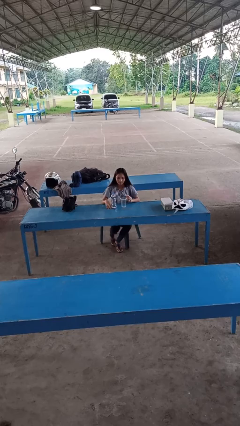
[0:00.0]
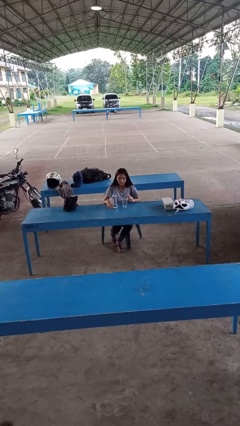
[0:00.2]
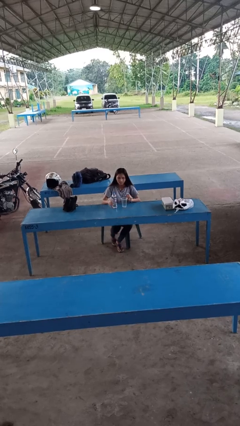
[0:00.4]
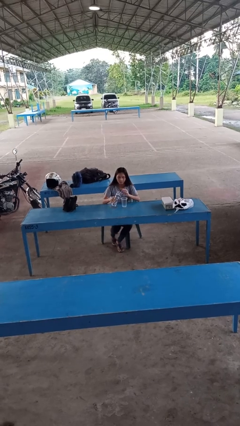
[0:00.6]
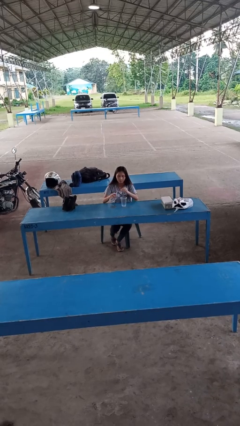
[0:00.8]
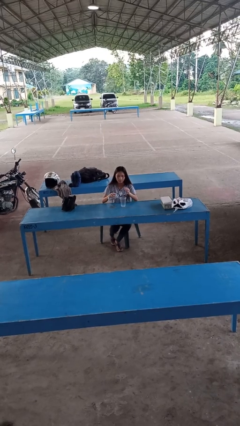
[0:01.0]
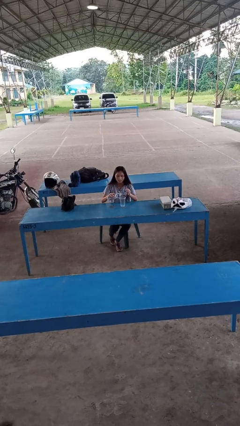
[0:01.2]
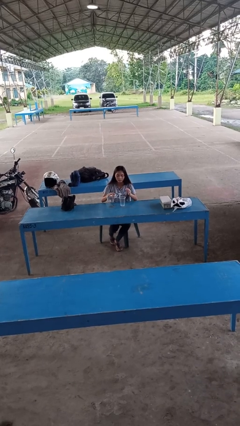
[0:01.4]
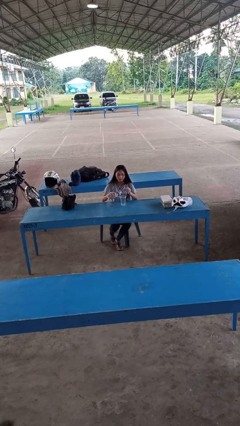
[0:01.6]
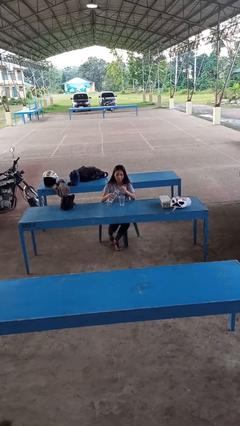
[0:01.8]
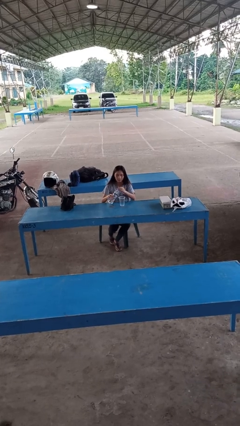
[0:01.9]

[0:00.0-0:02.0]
person pours liquid into cup

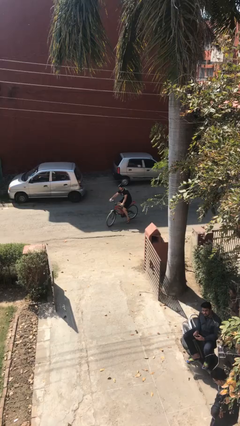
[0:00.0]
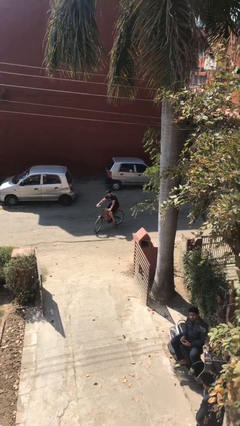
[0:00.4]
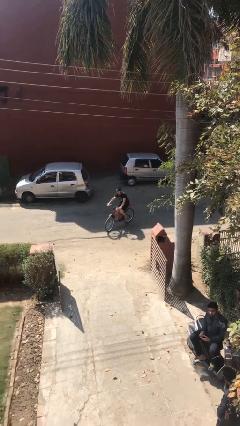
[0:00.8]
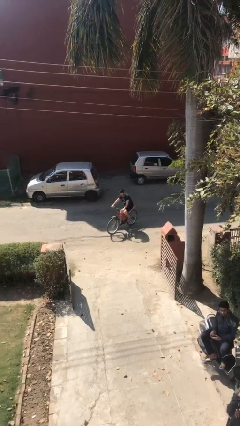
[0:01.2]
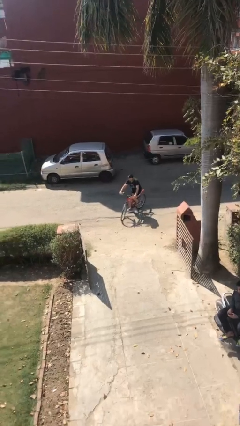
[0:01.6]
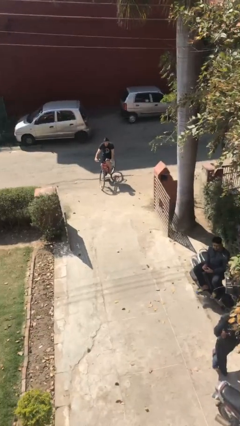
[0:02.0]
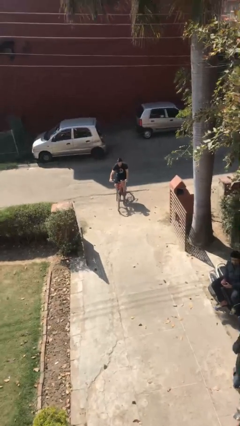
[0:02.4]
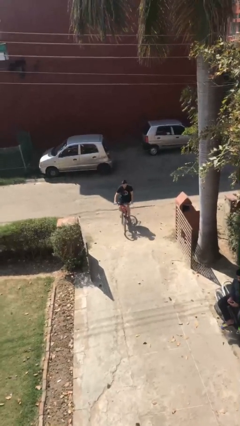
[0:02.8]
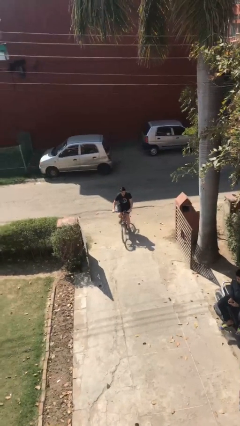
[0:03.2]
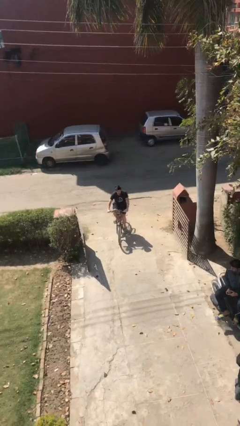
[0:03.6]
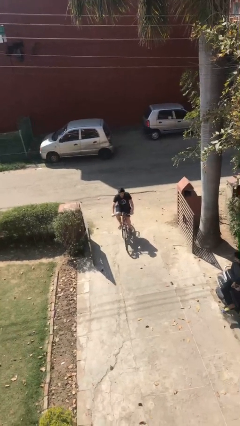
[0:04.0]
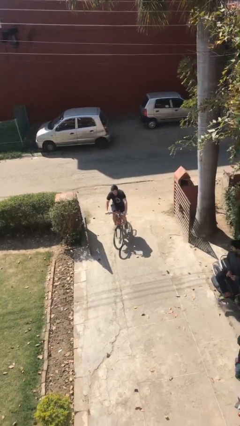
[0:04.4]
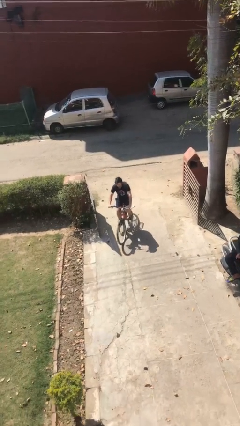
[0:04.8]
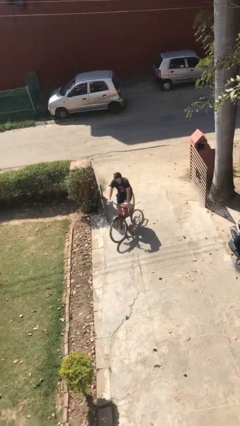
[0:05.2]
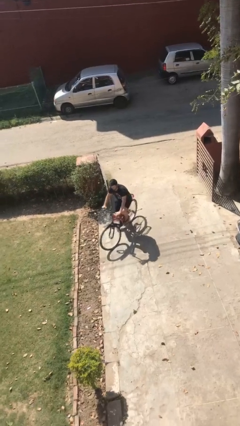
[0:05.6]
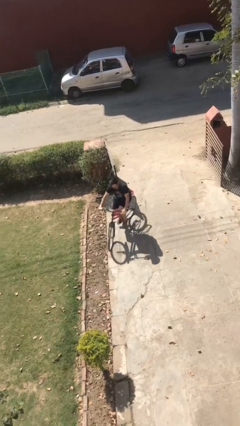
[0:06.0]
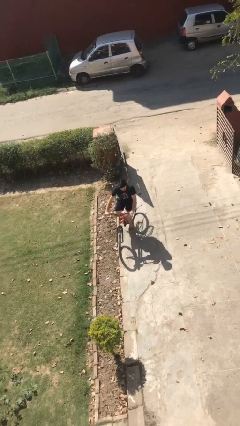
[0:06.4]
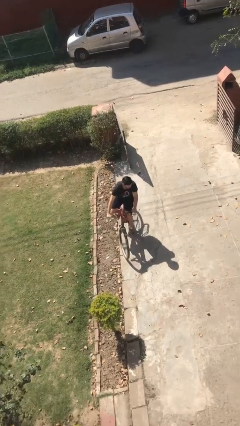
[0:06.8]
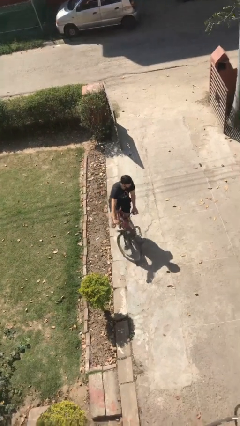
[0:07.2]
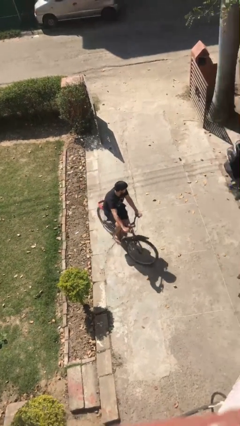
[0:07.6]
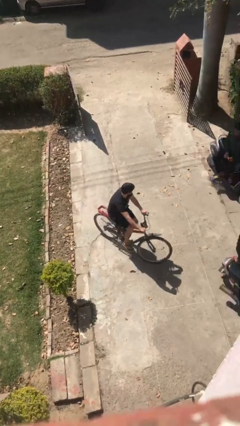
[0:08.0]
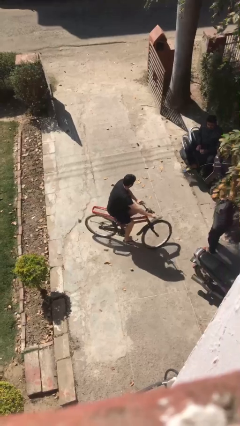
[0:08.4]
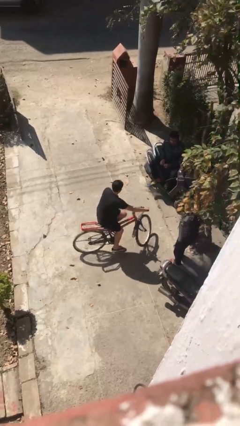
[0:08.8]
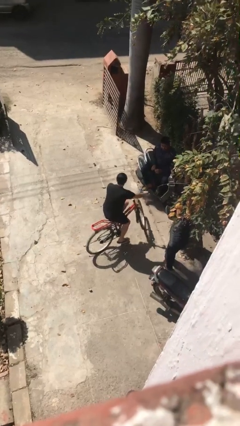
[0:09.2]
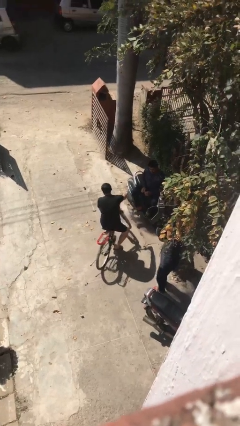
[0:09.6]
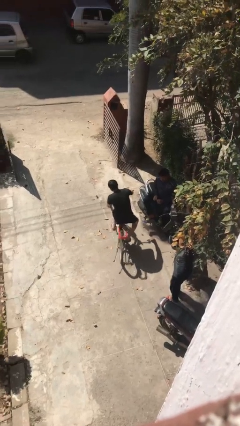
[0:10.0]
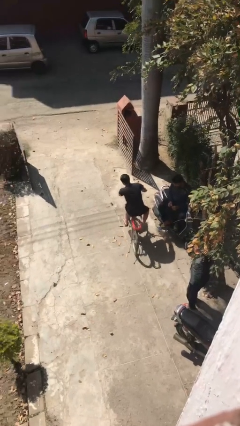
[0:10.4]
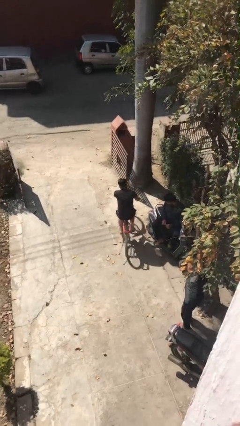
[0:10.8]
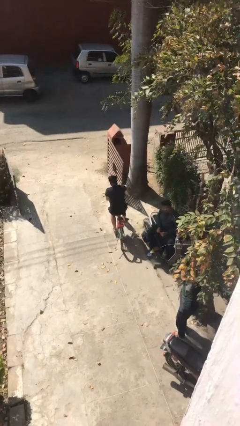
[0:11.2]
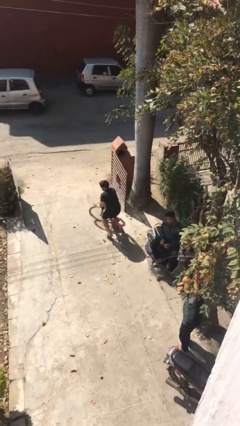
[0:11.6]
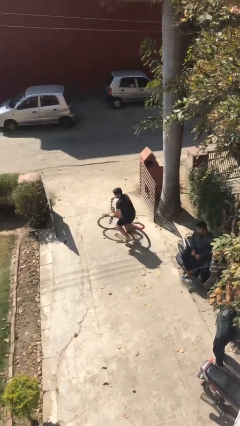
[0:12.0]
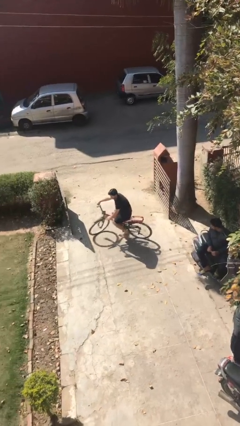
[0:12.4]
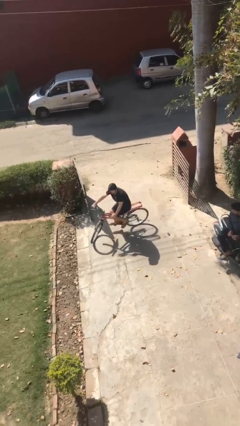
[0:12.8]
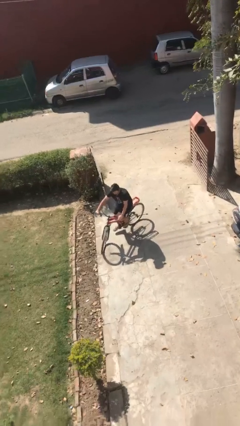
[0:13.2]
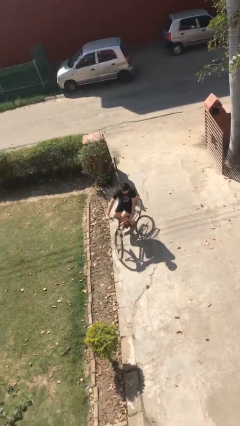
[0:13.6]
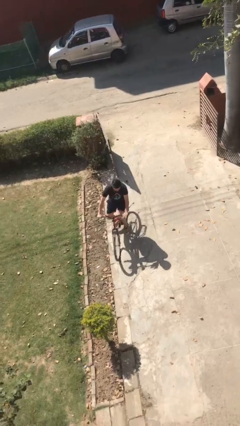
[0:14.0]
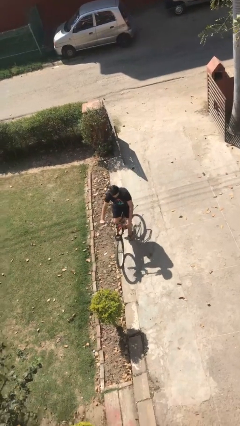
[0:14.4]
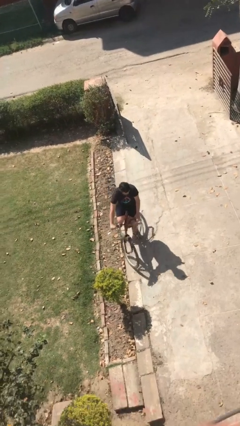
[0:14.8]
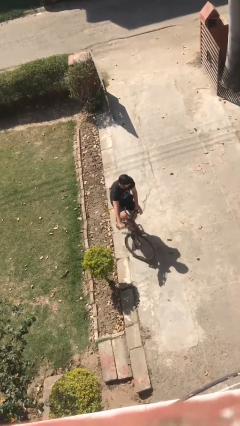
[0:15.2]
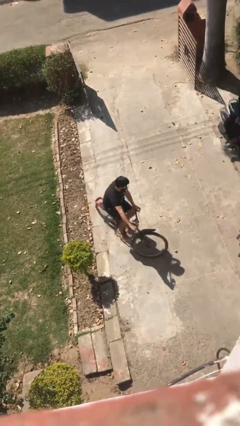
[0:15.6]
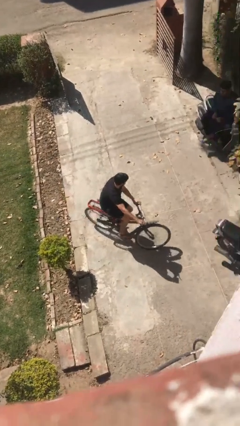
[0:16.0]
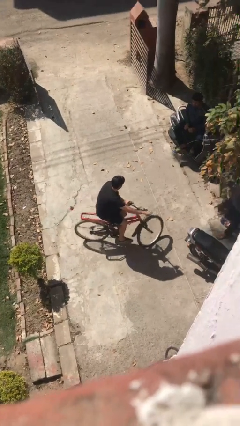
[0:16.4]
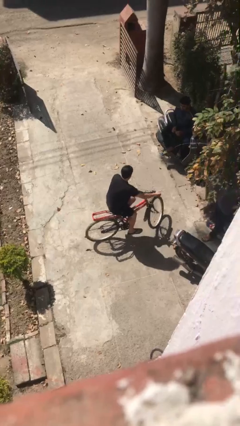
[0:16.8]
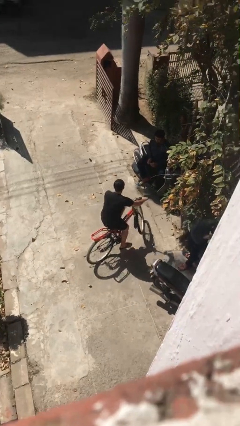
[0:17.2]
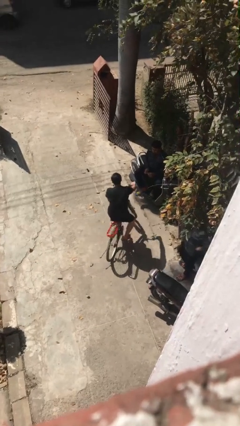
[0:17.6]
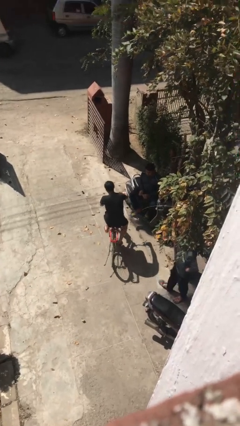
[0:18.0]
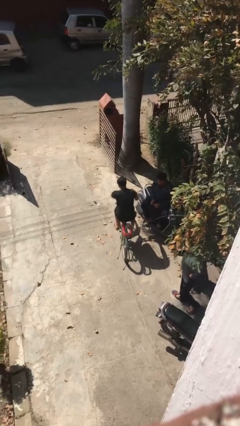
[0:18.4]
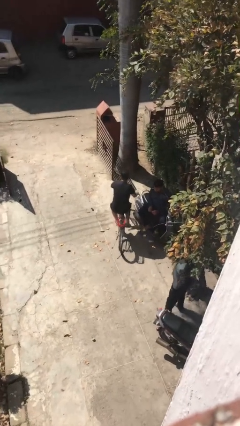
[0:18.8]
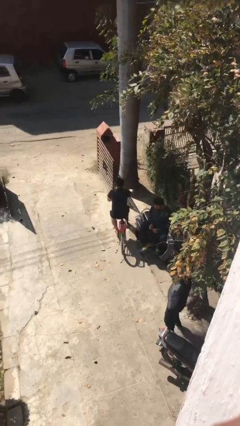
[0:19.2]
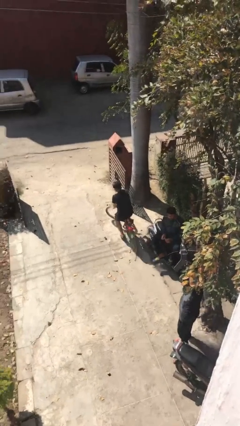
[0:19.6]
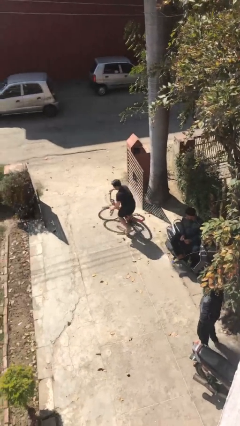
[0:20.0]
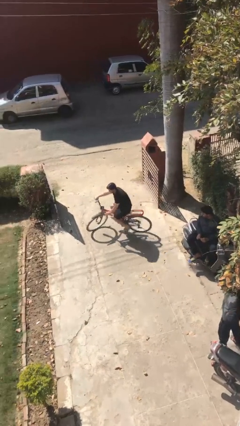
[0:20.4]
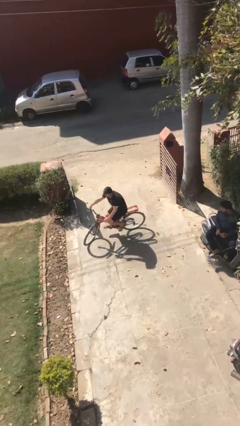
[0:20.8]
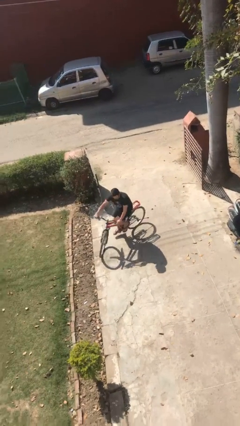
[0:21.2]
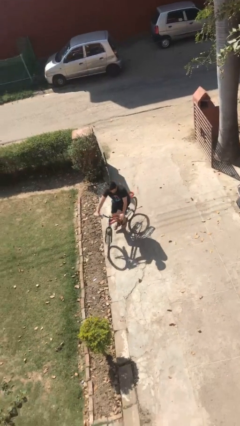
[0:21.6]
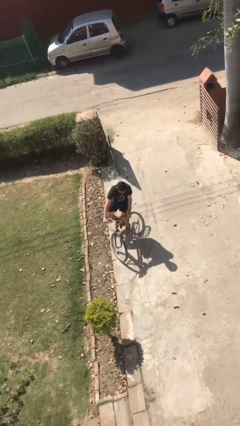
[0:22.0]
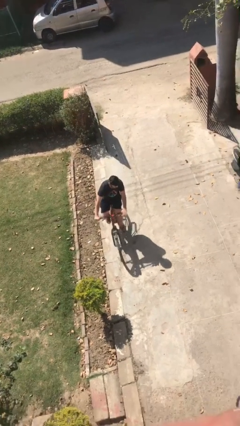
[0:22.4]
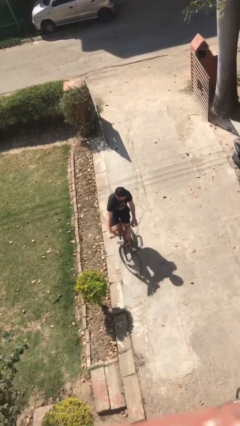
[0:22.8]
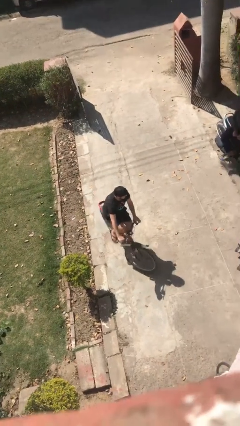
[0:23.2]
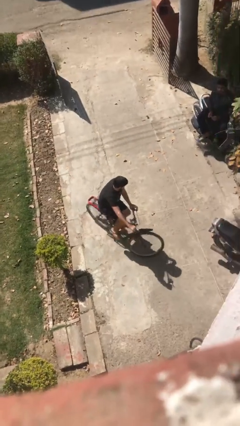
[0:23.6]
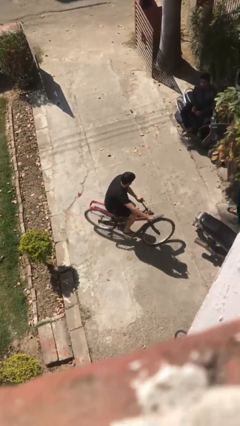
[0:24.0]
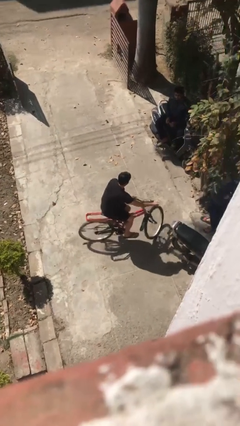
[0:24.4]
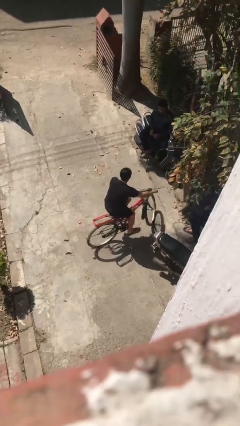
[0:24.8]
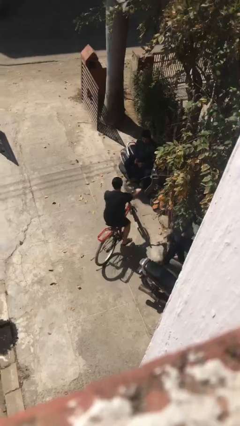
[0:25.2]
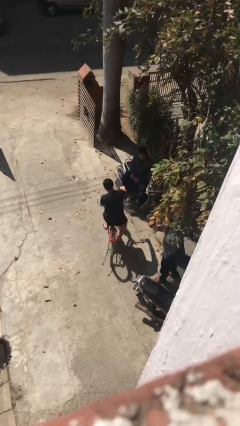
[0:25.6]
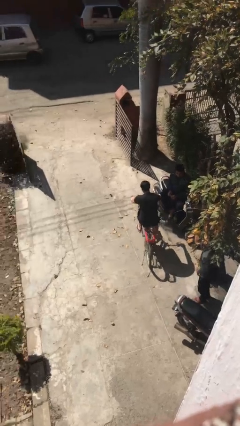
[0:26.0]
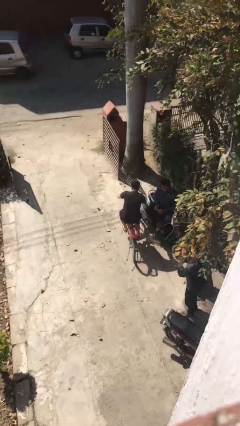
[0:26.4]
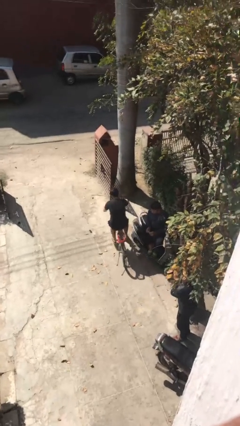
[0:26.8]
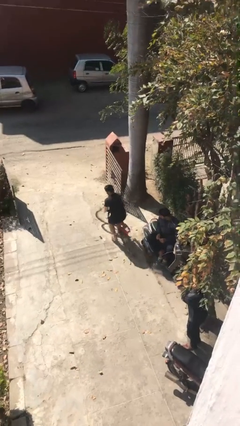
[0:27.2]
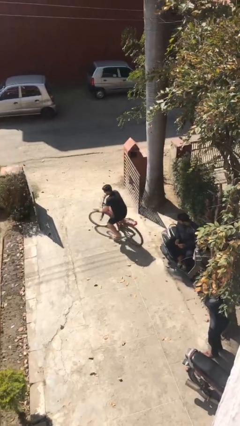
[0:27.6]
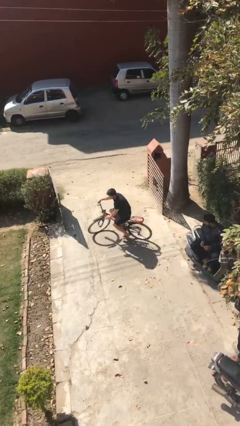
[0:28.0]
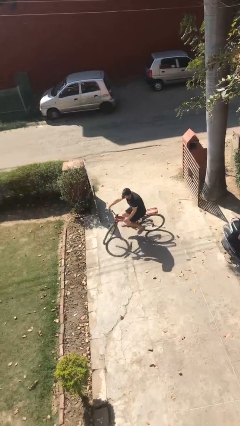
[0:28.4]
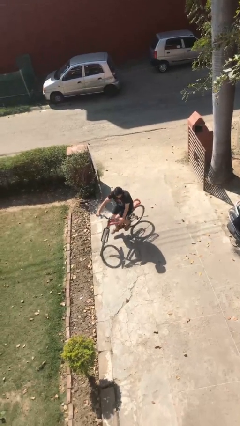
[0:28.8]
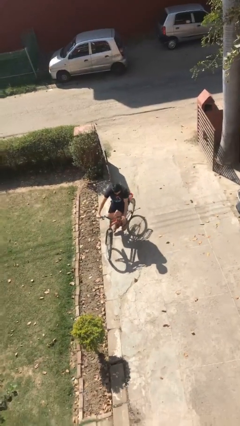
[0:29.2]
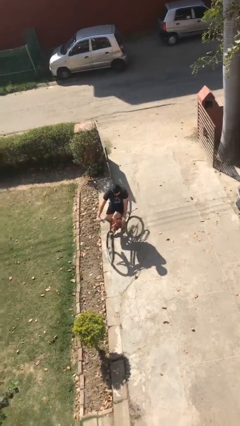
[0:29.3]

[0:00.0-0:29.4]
person rides bicycle

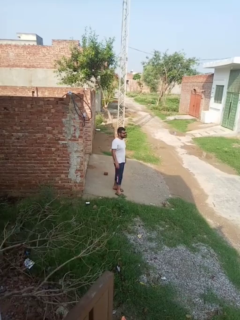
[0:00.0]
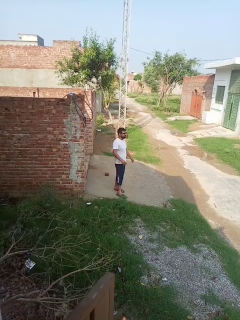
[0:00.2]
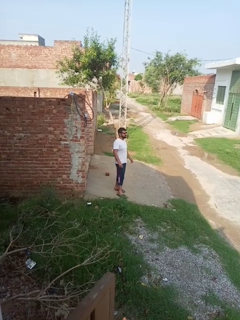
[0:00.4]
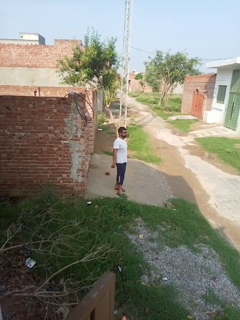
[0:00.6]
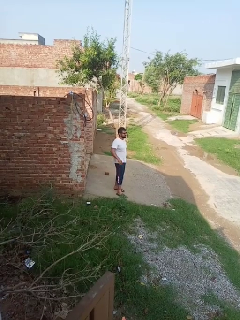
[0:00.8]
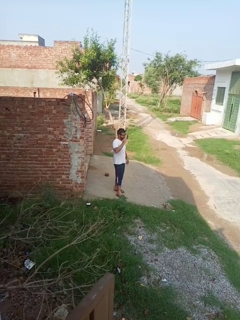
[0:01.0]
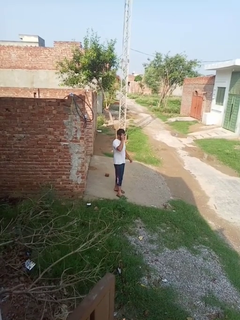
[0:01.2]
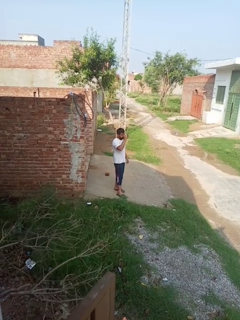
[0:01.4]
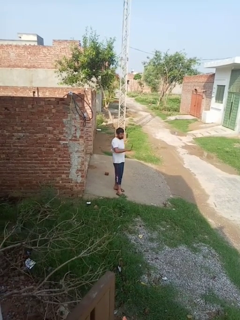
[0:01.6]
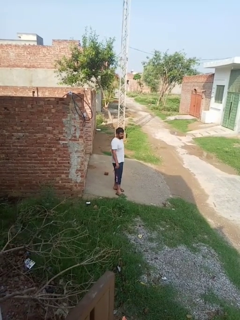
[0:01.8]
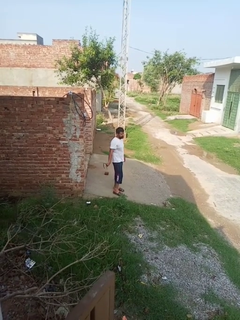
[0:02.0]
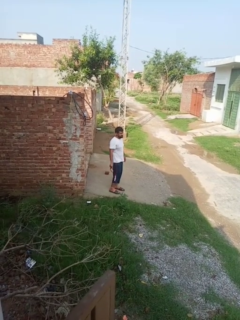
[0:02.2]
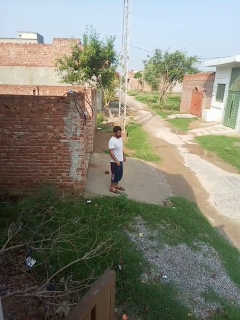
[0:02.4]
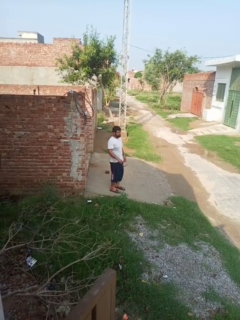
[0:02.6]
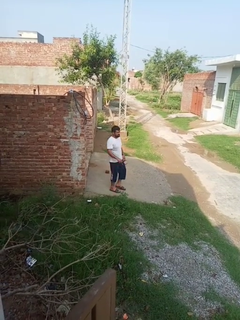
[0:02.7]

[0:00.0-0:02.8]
person takes off glasses
